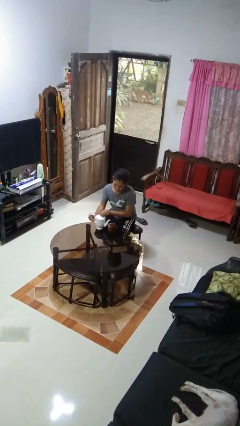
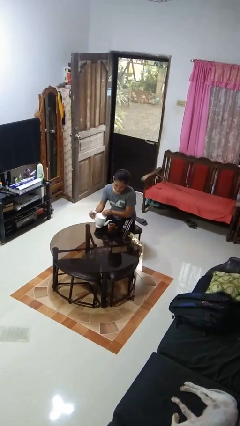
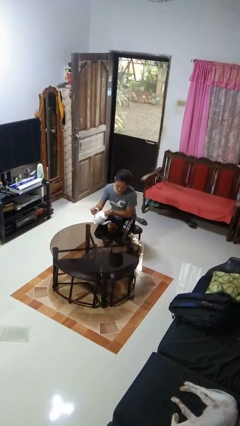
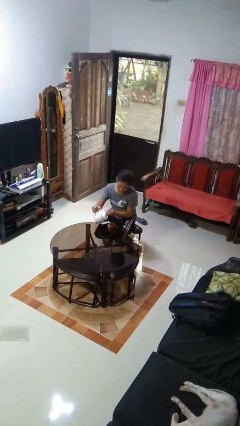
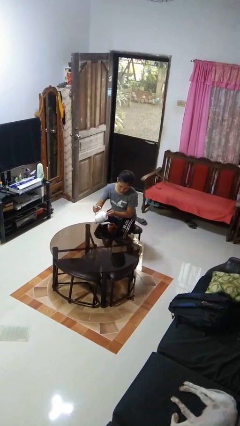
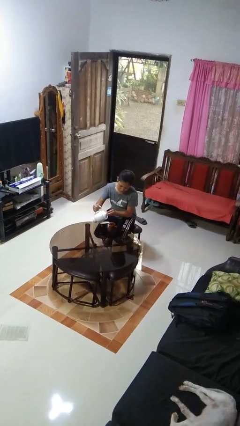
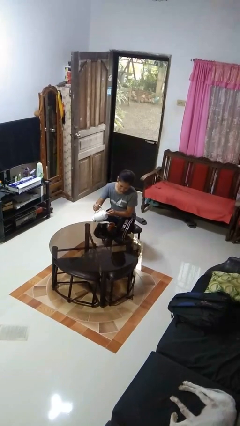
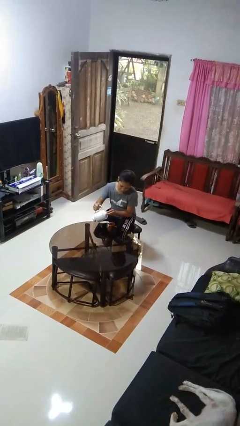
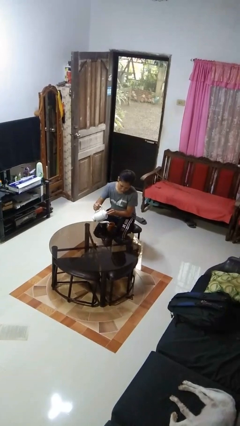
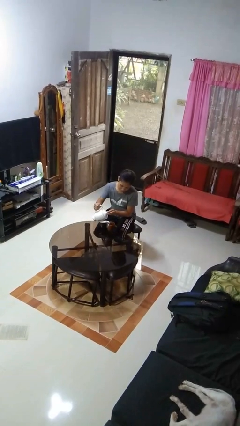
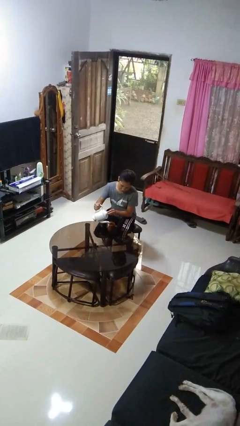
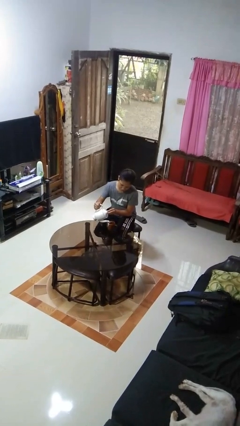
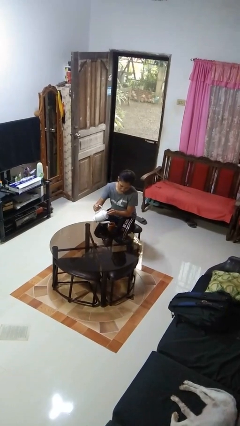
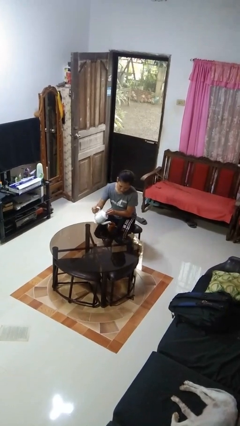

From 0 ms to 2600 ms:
person pours coffee into mug

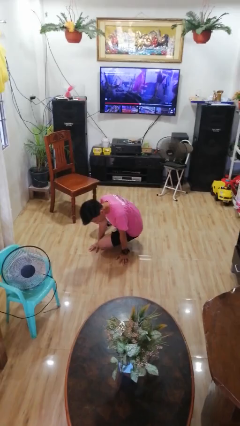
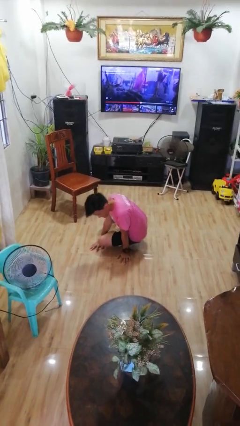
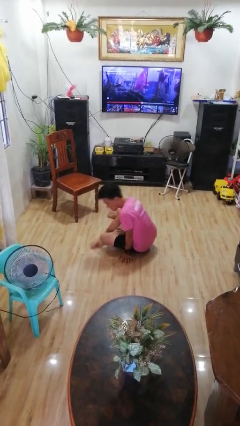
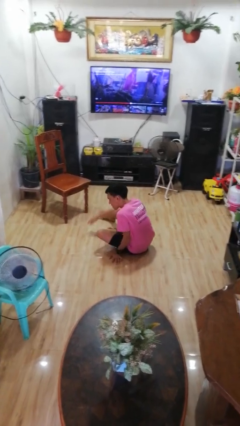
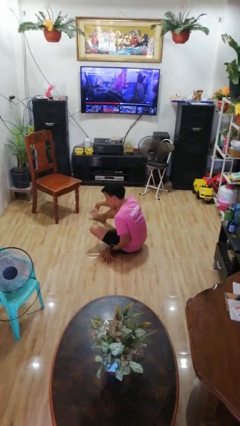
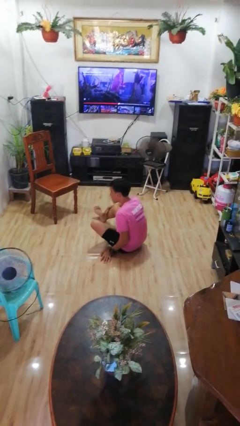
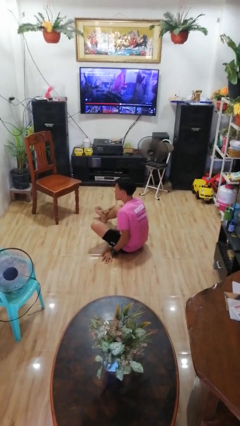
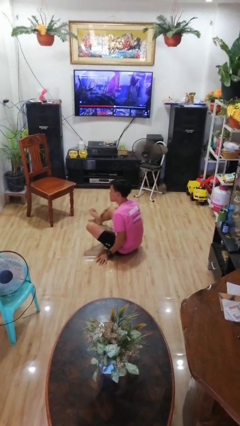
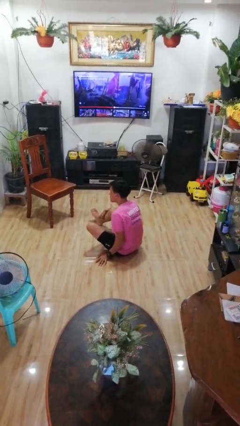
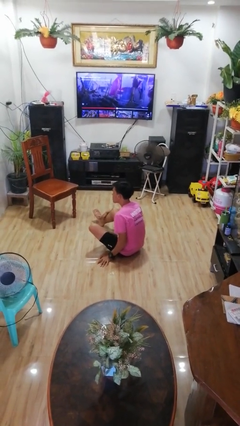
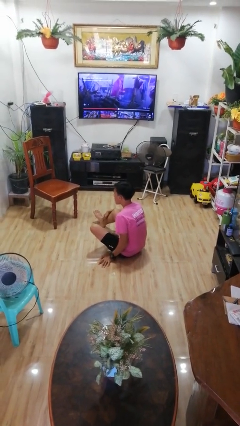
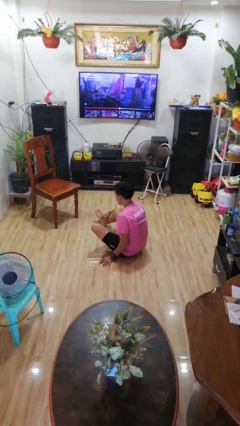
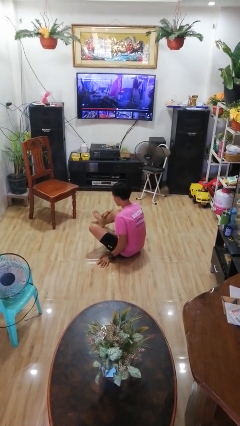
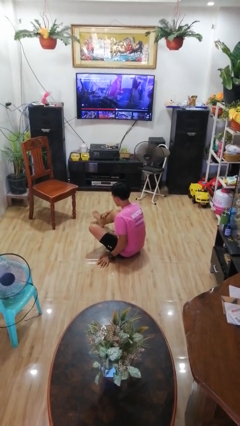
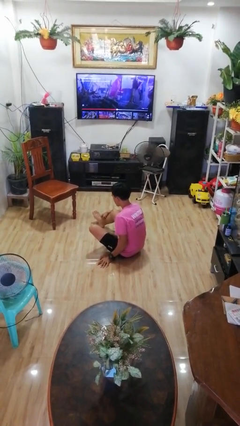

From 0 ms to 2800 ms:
person lies down on floor

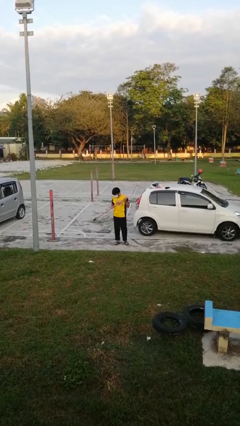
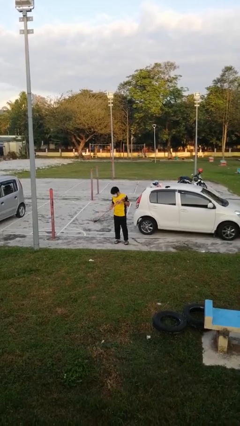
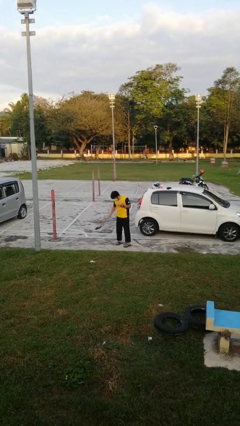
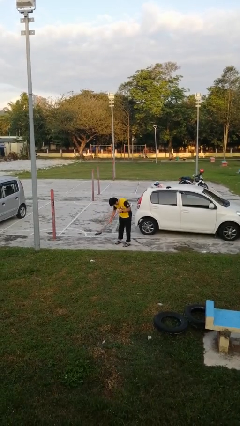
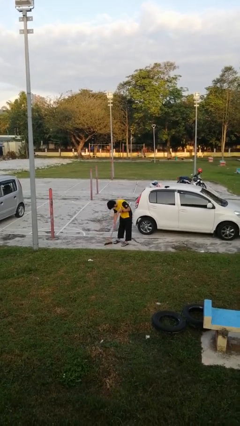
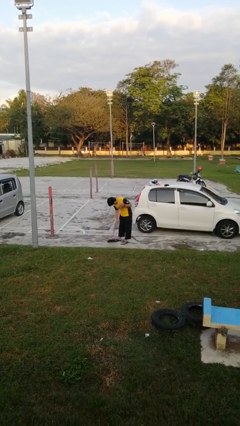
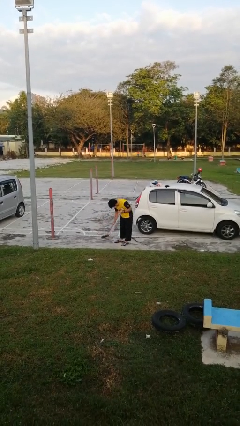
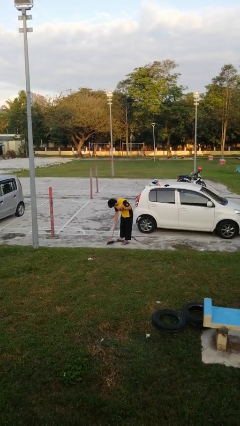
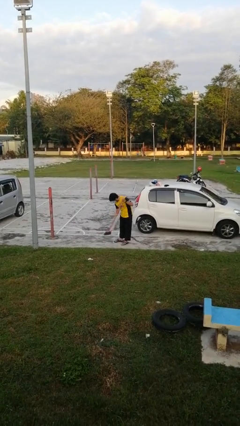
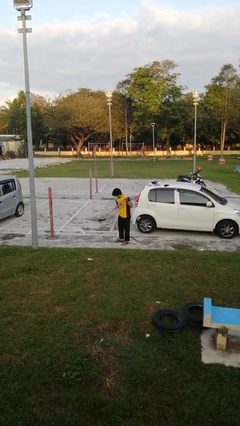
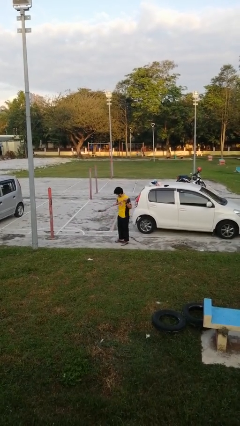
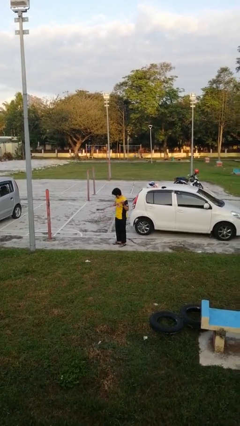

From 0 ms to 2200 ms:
person sweeps floor

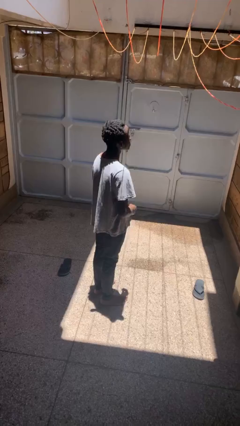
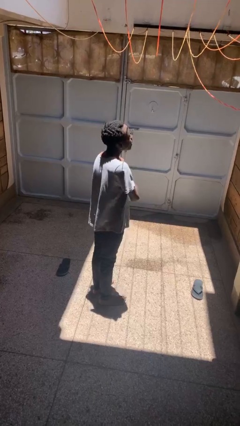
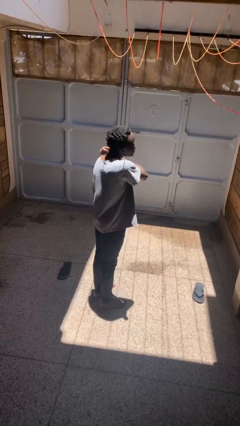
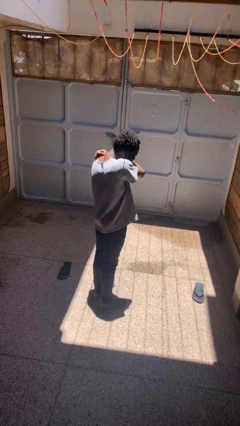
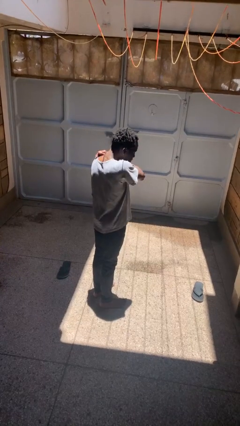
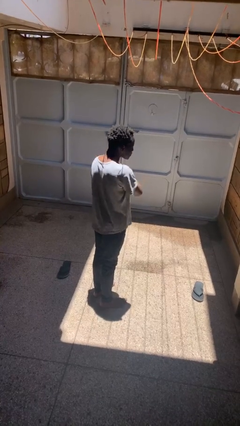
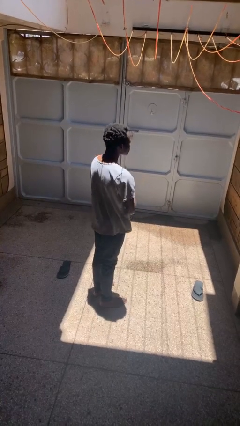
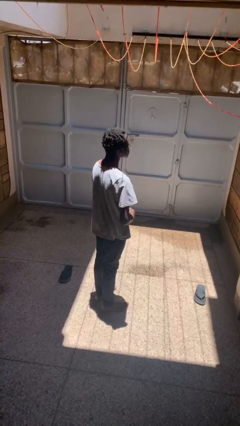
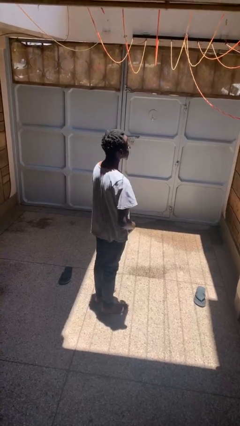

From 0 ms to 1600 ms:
person sneezes into arm

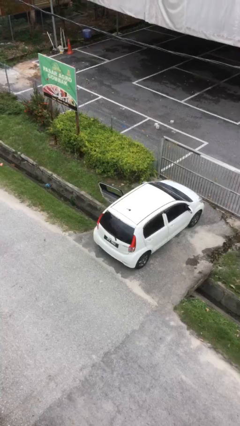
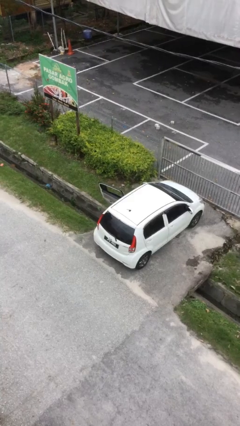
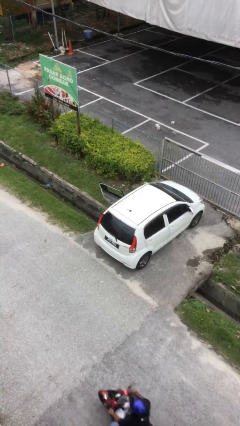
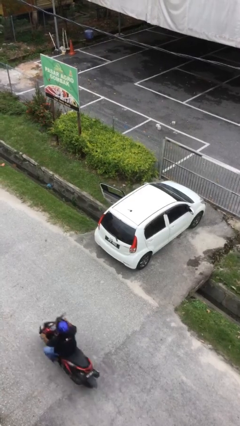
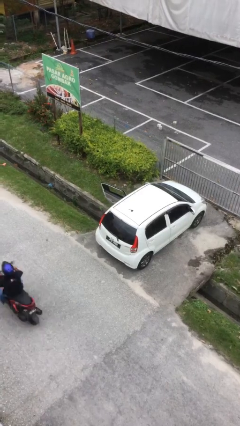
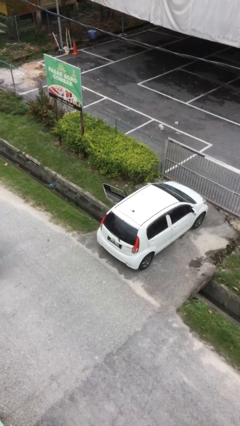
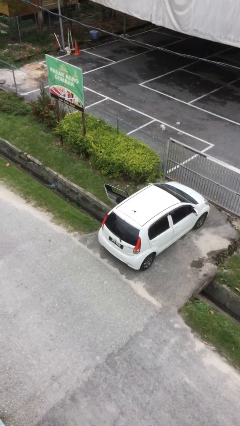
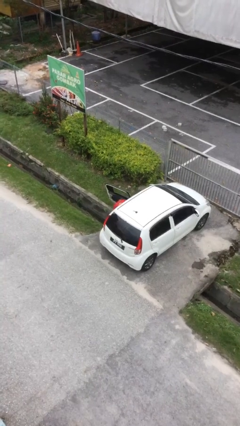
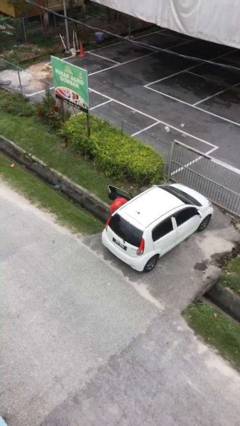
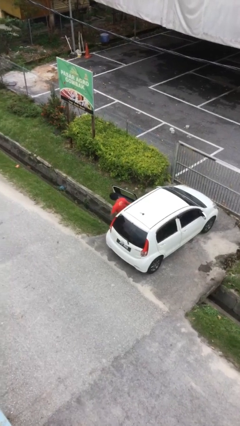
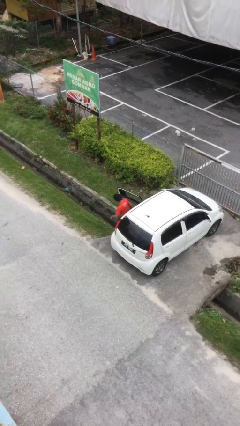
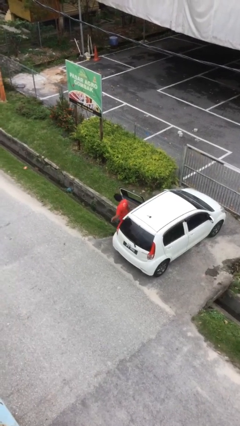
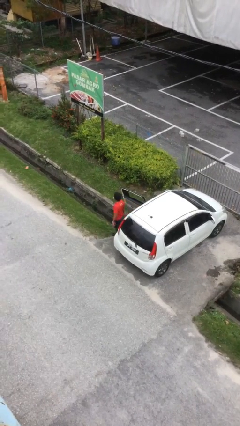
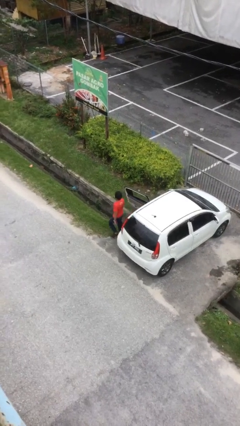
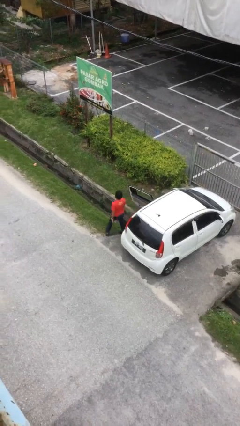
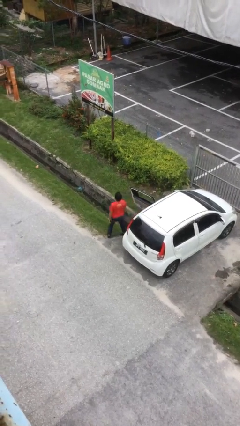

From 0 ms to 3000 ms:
person exits car

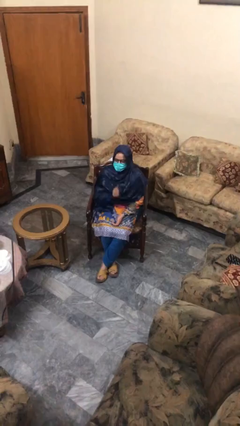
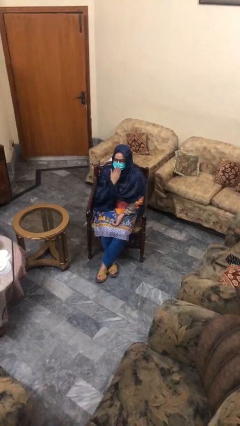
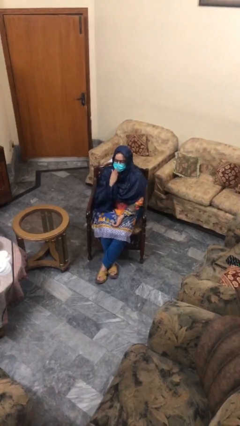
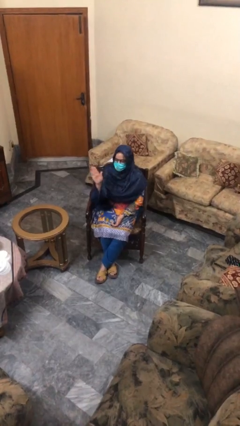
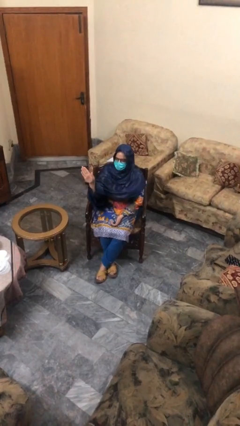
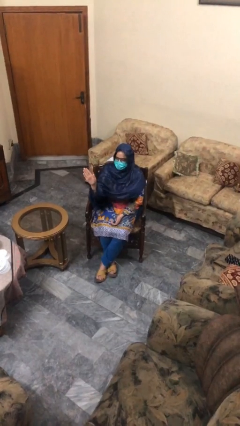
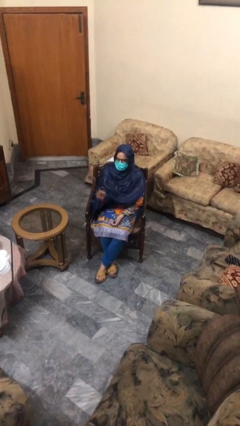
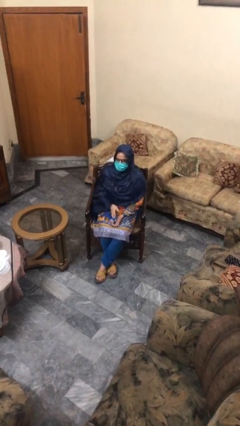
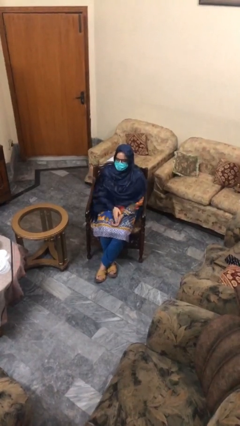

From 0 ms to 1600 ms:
person gestures blow kiss

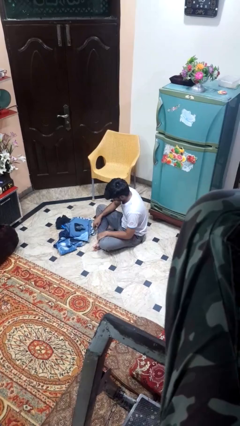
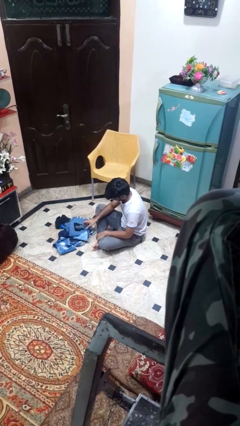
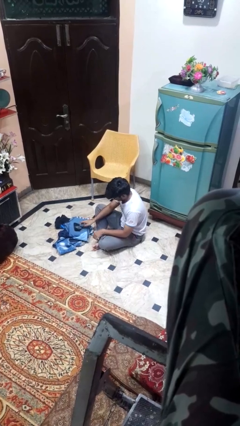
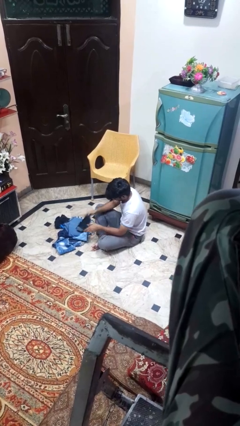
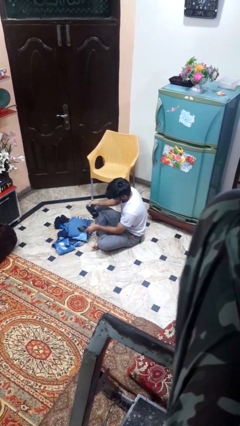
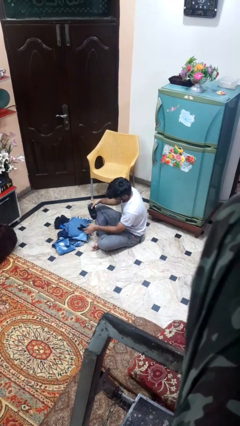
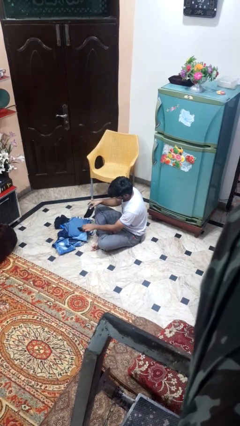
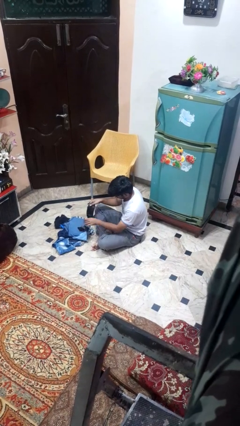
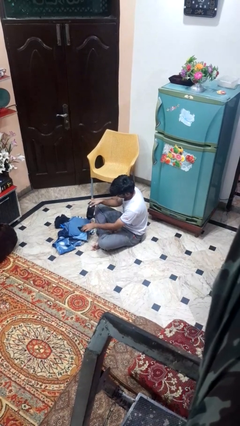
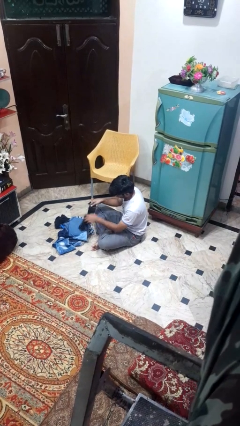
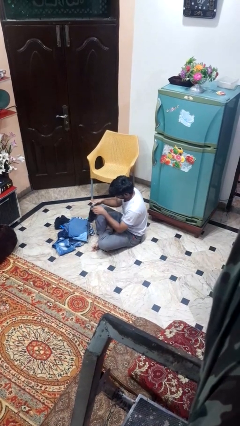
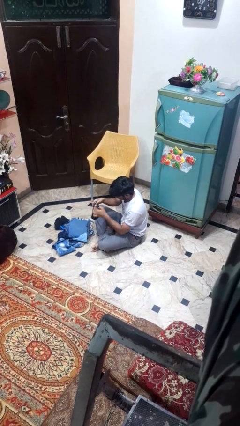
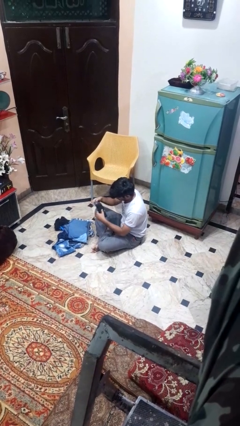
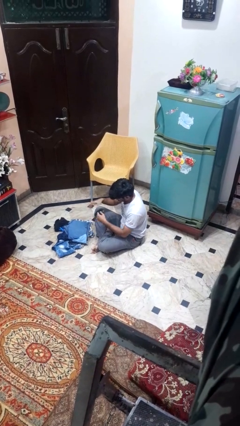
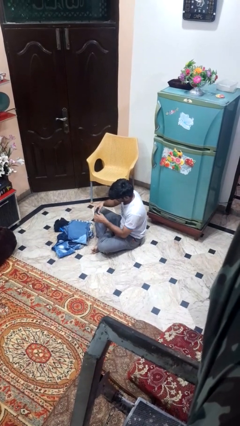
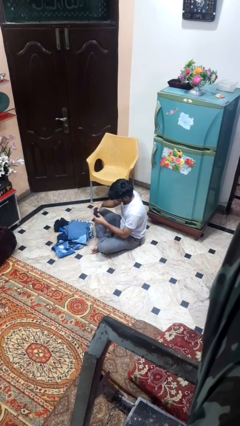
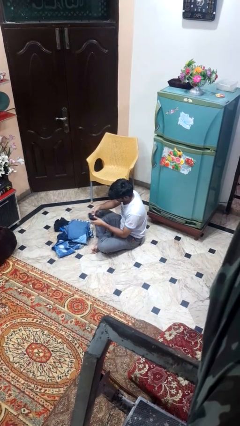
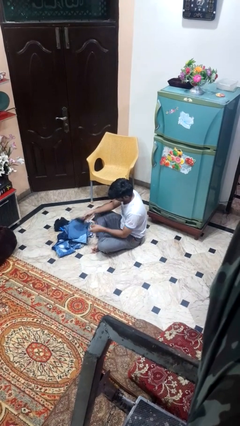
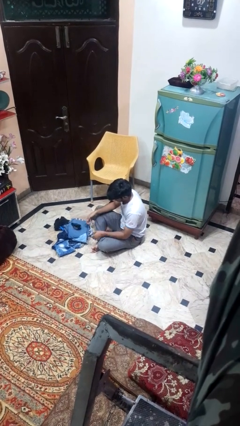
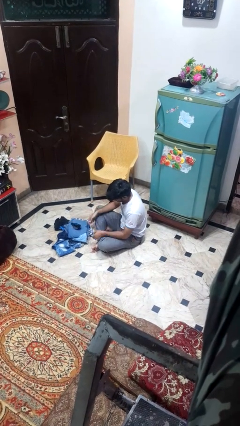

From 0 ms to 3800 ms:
person folds socks
